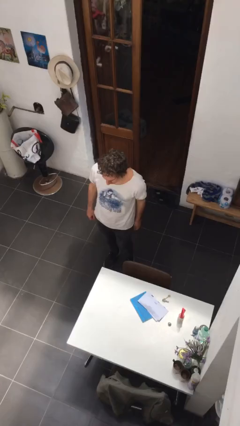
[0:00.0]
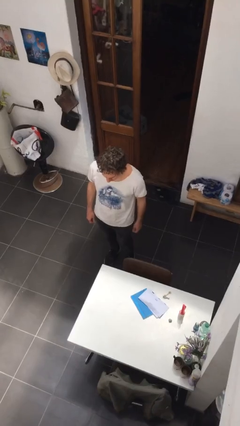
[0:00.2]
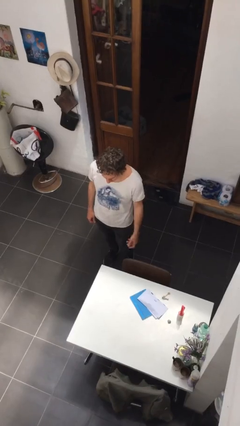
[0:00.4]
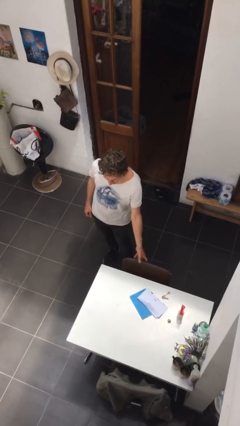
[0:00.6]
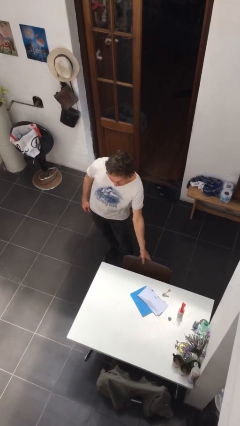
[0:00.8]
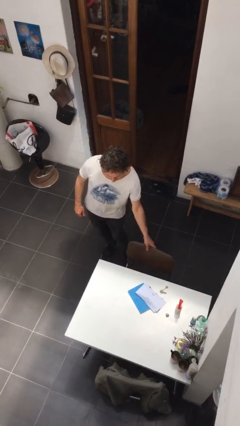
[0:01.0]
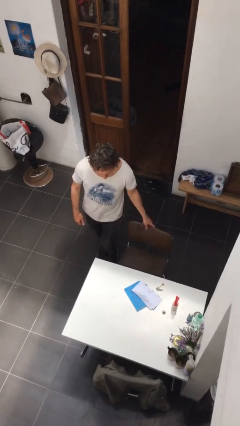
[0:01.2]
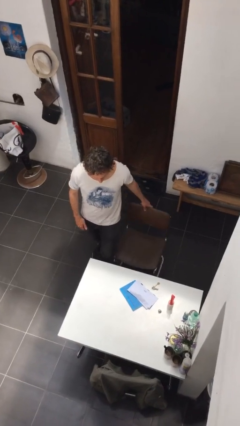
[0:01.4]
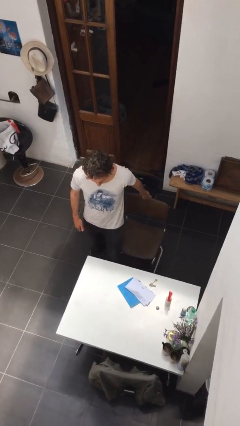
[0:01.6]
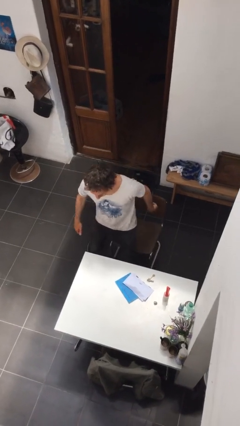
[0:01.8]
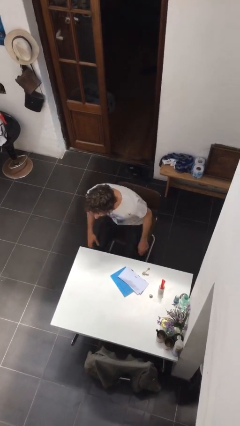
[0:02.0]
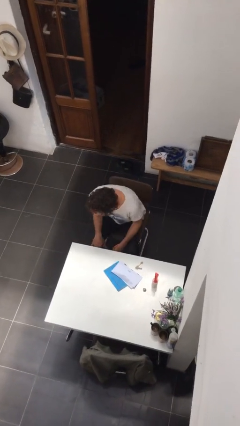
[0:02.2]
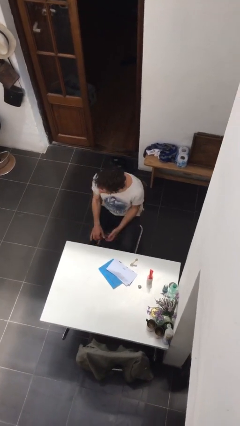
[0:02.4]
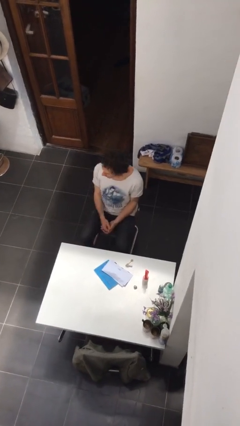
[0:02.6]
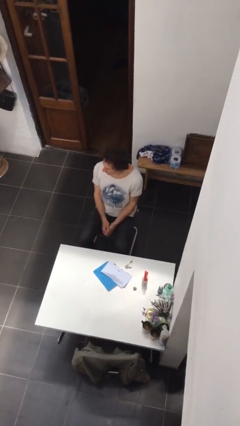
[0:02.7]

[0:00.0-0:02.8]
person sits down

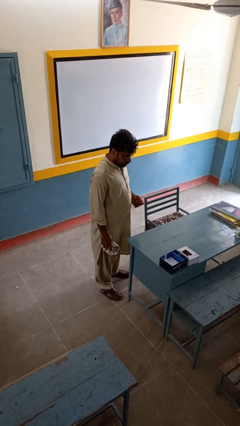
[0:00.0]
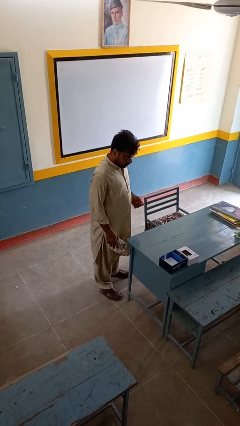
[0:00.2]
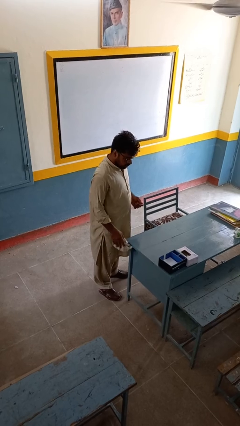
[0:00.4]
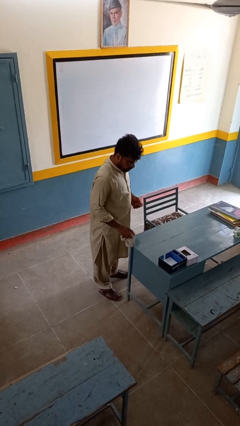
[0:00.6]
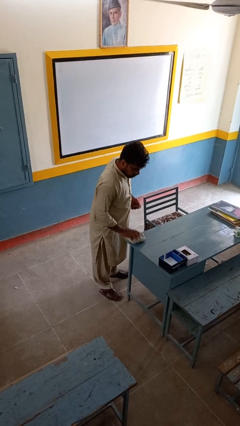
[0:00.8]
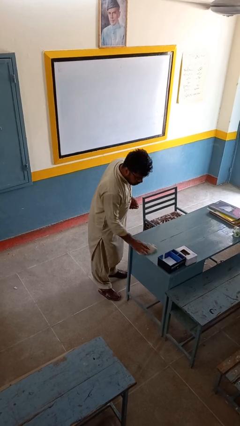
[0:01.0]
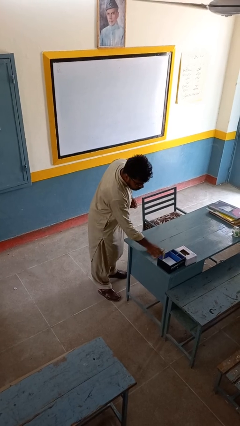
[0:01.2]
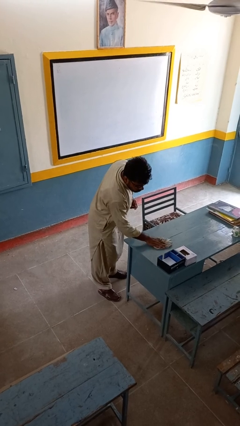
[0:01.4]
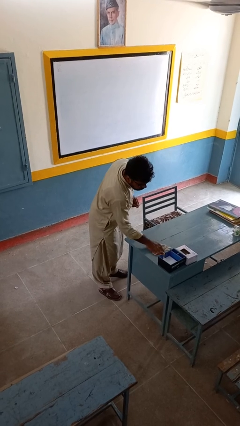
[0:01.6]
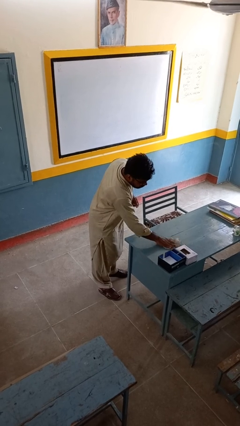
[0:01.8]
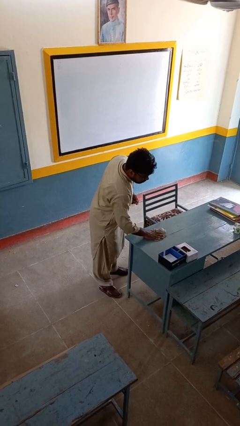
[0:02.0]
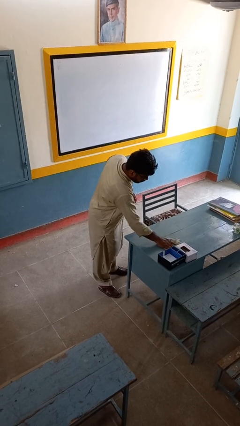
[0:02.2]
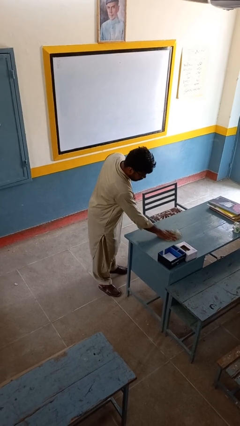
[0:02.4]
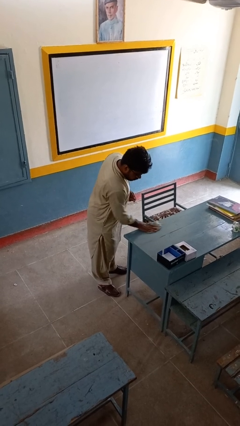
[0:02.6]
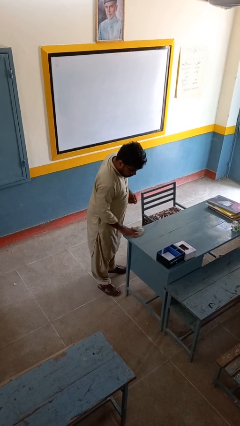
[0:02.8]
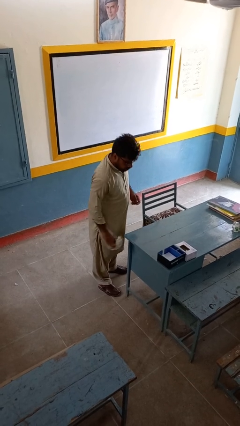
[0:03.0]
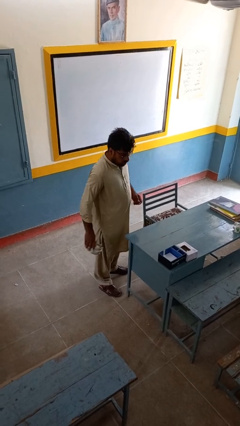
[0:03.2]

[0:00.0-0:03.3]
person cleans table with rag

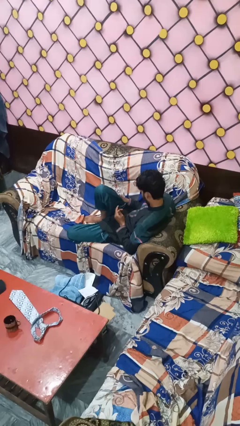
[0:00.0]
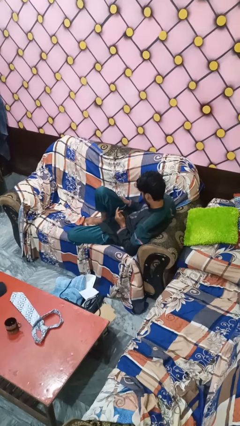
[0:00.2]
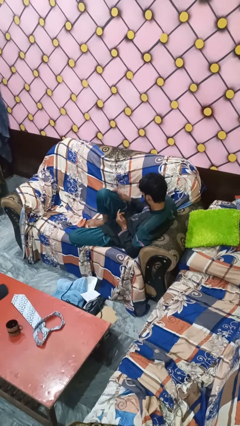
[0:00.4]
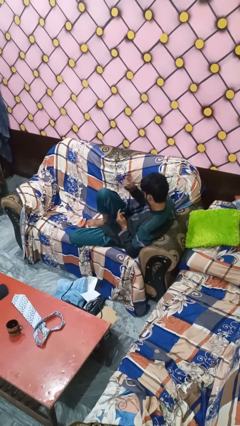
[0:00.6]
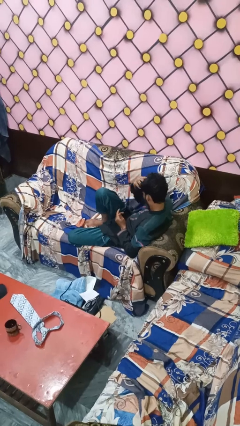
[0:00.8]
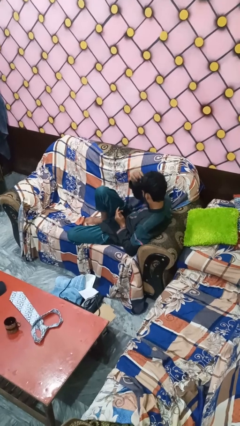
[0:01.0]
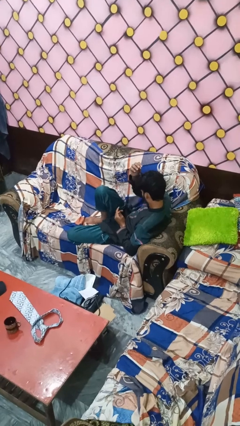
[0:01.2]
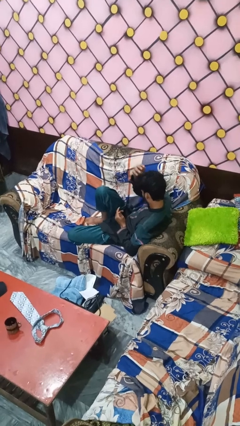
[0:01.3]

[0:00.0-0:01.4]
person strokes hair

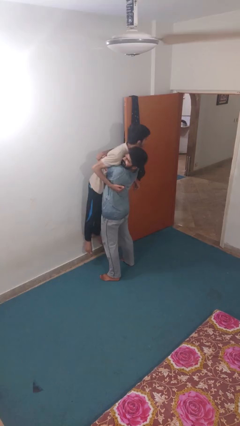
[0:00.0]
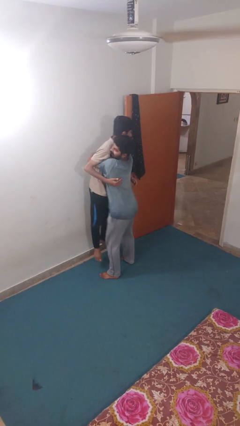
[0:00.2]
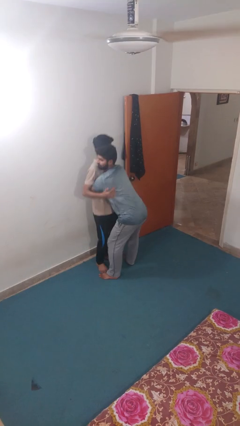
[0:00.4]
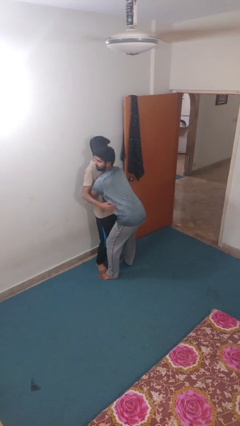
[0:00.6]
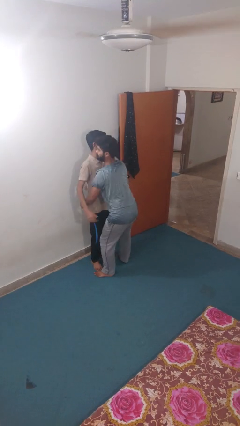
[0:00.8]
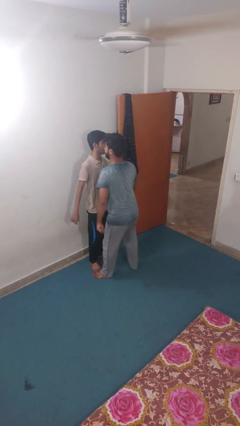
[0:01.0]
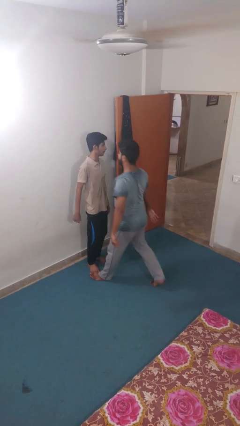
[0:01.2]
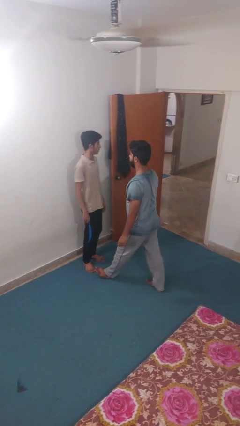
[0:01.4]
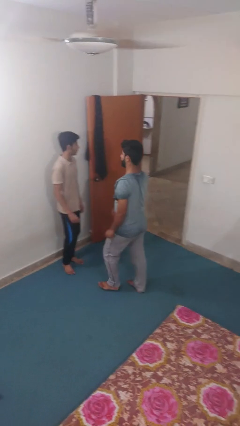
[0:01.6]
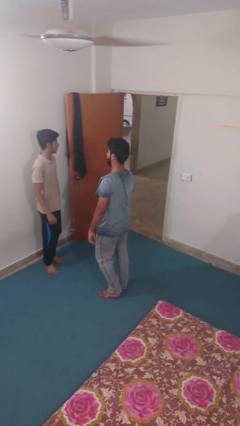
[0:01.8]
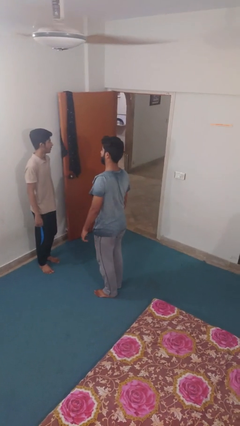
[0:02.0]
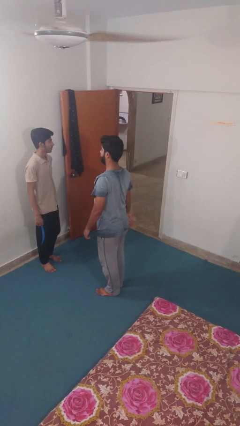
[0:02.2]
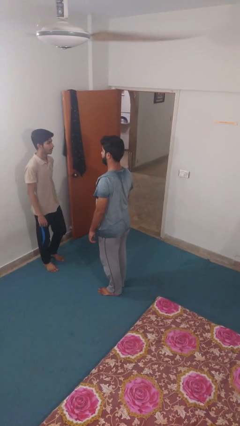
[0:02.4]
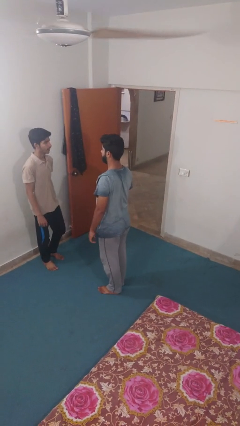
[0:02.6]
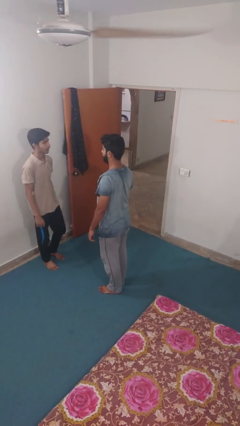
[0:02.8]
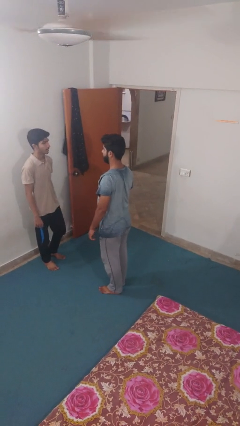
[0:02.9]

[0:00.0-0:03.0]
person puts down person

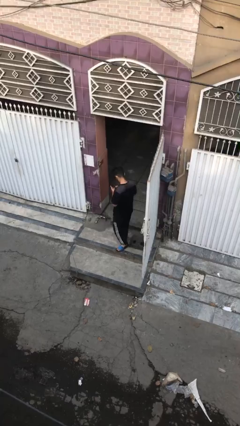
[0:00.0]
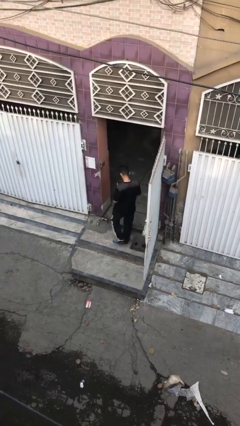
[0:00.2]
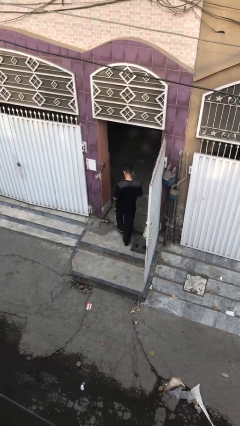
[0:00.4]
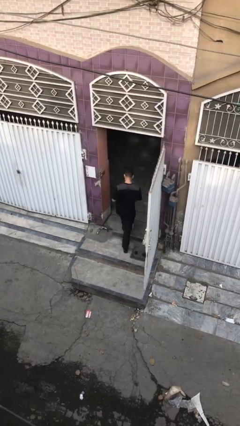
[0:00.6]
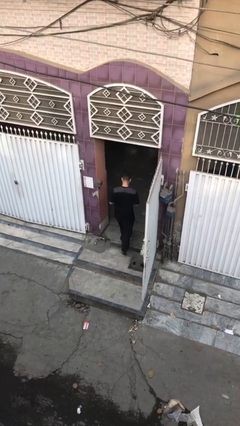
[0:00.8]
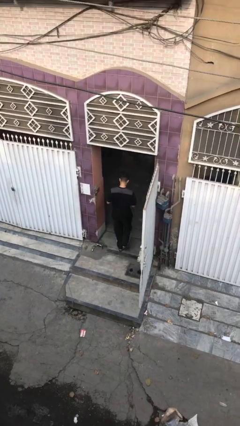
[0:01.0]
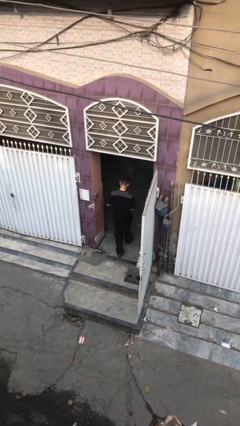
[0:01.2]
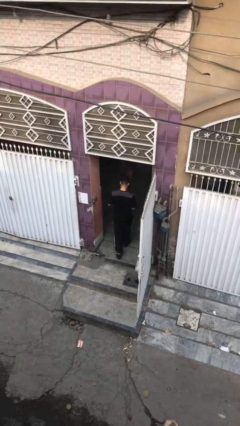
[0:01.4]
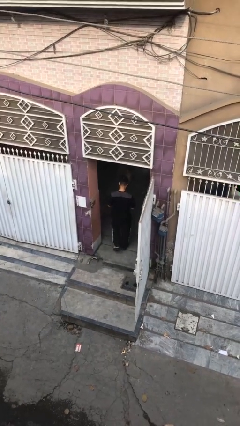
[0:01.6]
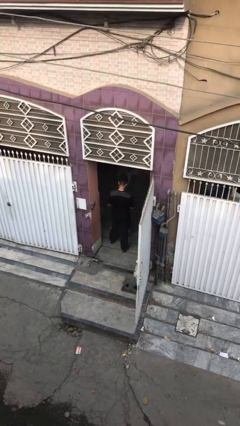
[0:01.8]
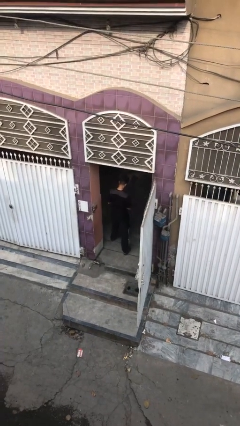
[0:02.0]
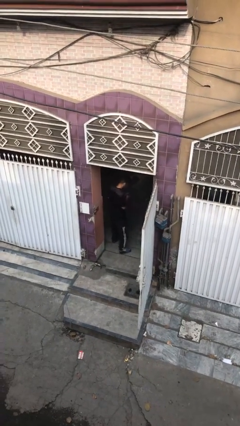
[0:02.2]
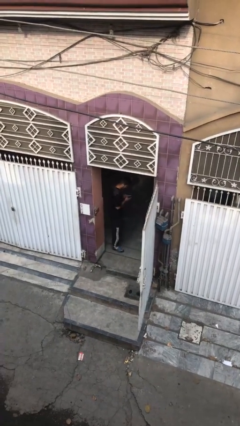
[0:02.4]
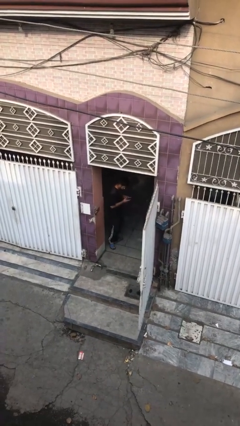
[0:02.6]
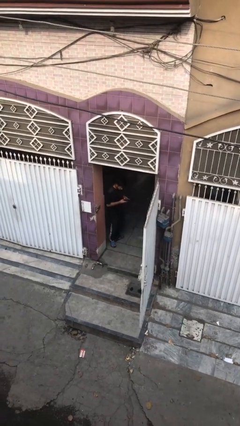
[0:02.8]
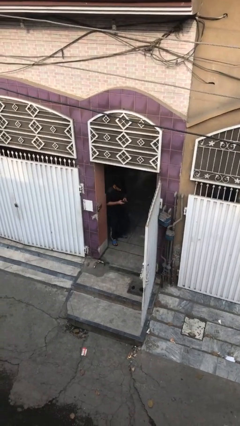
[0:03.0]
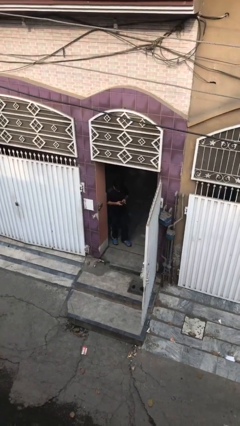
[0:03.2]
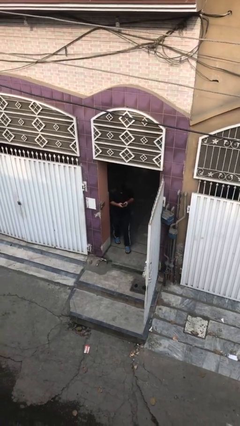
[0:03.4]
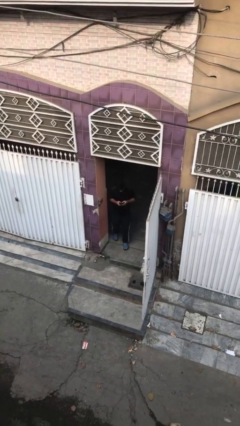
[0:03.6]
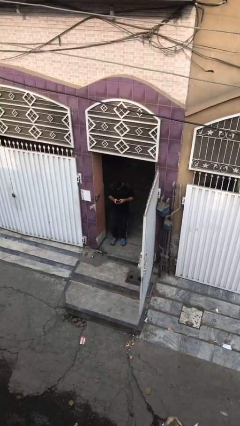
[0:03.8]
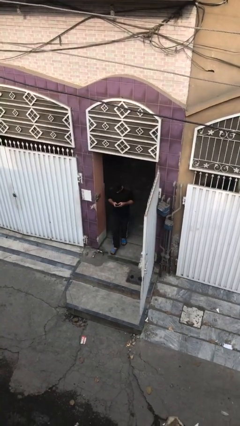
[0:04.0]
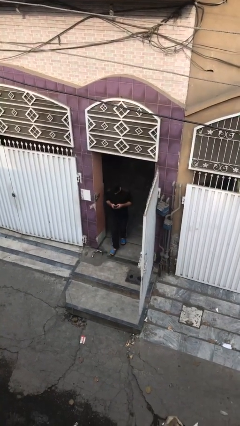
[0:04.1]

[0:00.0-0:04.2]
person exits scene through structure

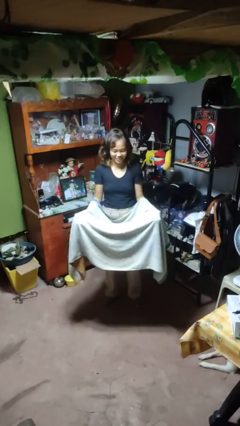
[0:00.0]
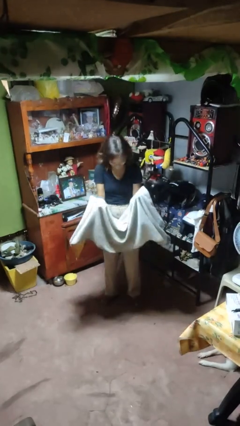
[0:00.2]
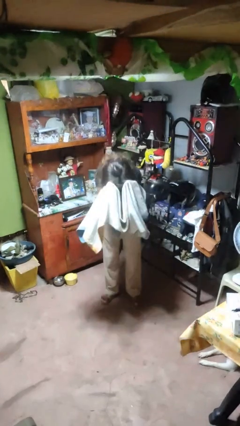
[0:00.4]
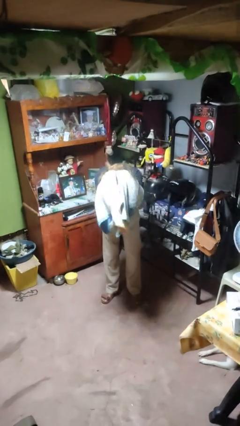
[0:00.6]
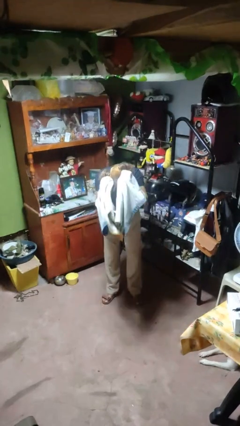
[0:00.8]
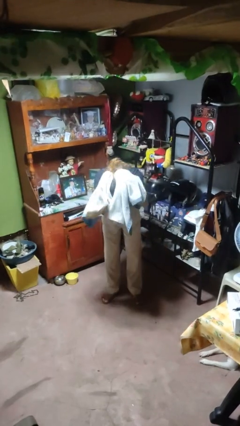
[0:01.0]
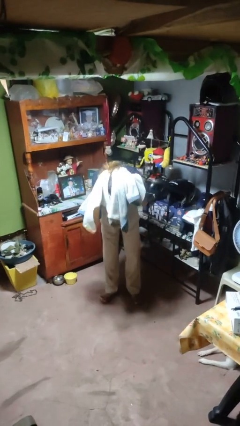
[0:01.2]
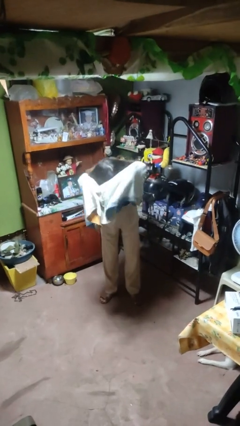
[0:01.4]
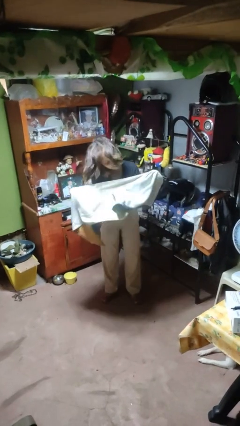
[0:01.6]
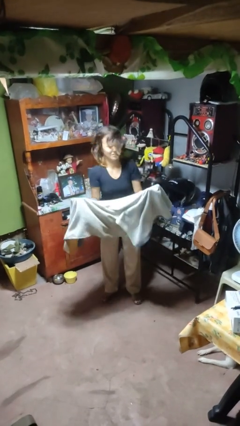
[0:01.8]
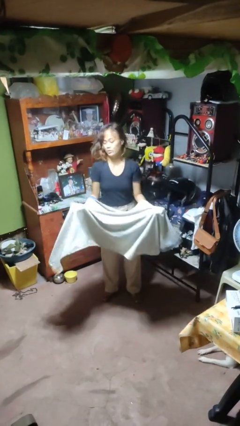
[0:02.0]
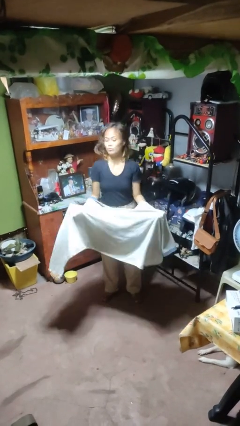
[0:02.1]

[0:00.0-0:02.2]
person dries hair with towel

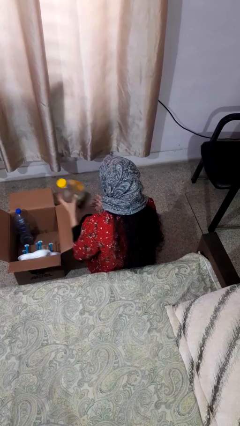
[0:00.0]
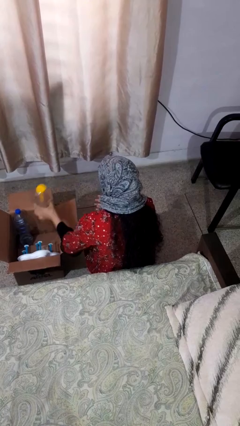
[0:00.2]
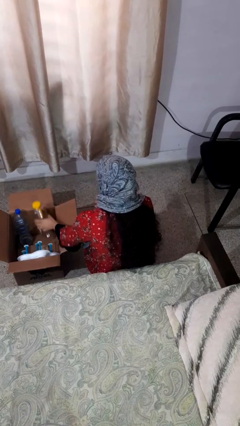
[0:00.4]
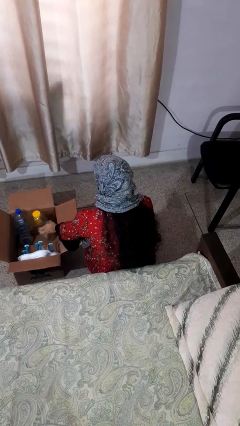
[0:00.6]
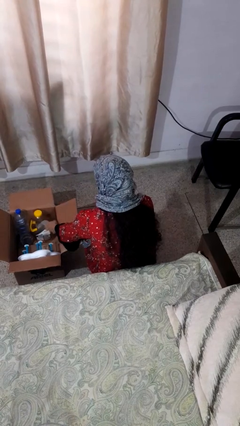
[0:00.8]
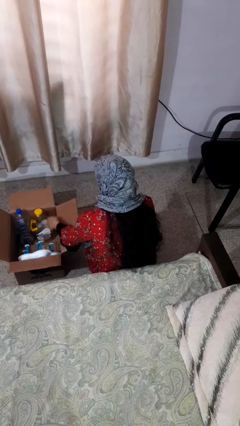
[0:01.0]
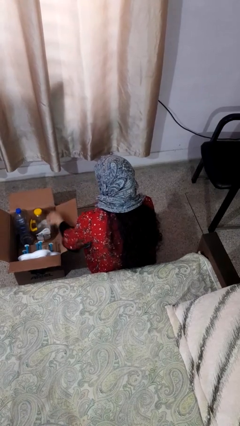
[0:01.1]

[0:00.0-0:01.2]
person puts object into box
